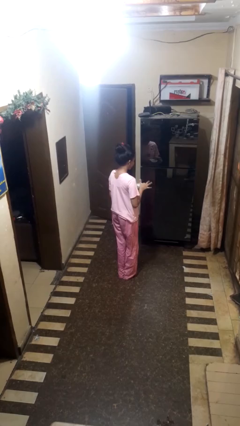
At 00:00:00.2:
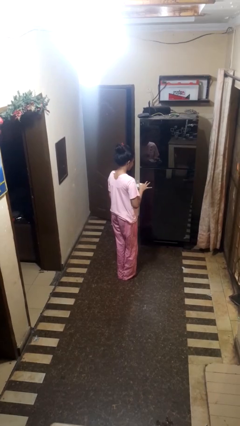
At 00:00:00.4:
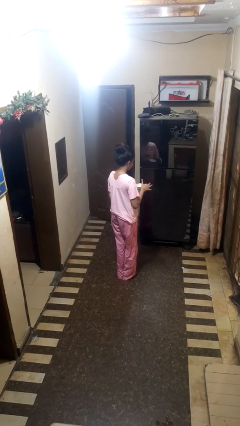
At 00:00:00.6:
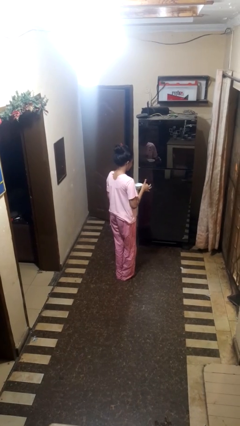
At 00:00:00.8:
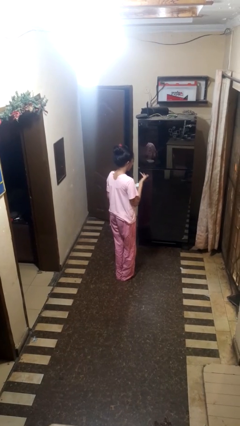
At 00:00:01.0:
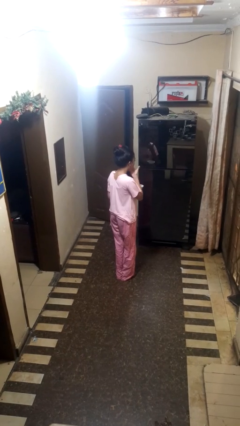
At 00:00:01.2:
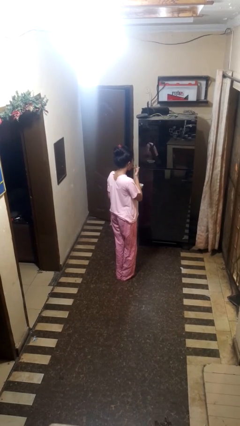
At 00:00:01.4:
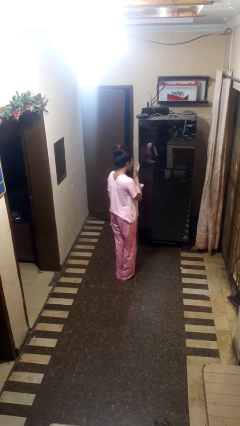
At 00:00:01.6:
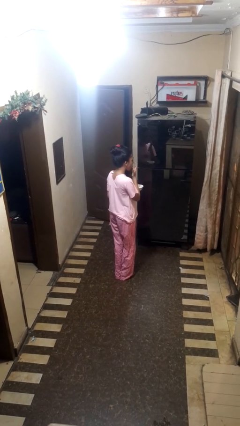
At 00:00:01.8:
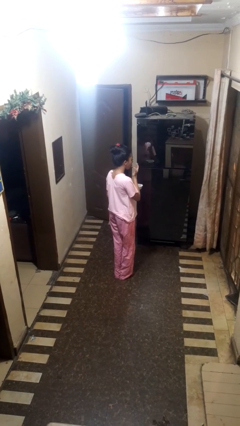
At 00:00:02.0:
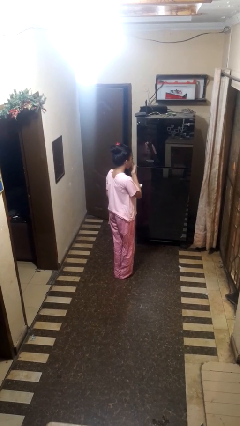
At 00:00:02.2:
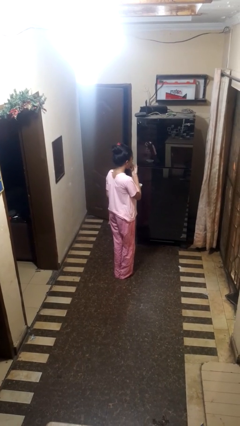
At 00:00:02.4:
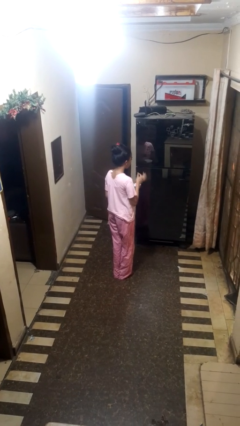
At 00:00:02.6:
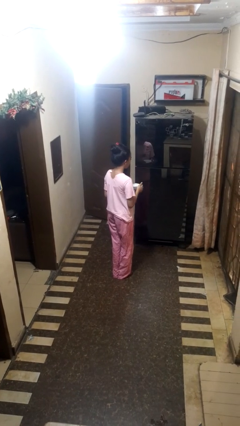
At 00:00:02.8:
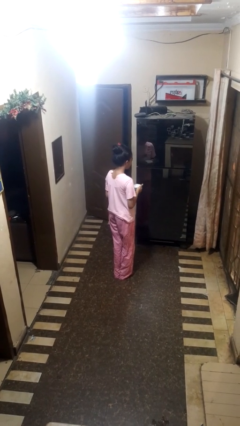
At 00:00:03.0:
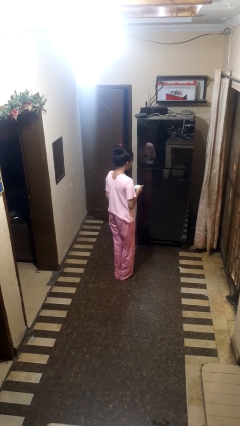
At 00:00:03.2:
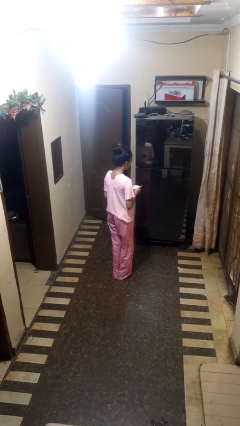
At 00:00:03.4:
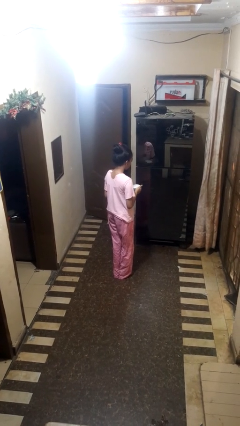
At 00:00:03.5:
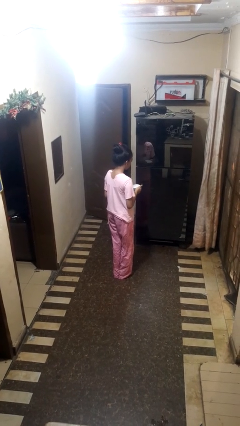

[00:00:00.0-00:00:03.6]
person licks fingers

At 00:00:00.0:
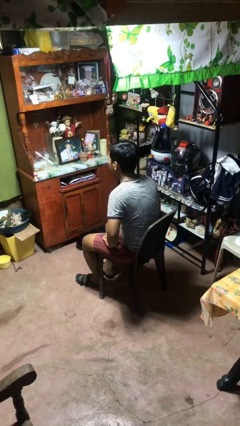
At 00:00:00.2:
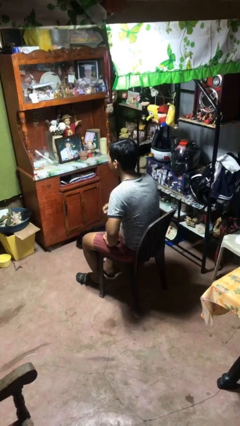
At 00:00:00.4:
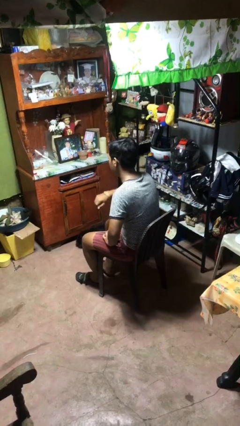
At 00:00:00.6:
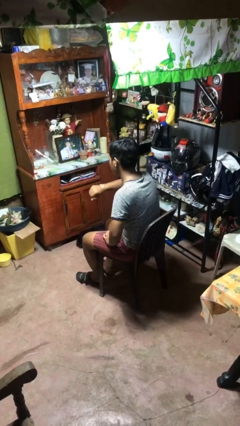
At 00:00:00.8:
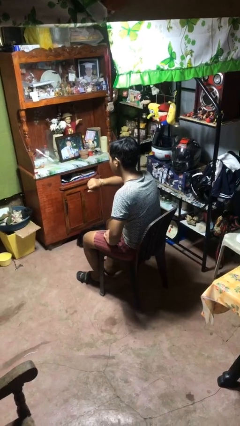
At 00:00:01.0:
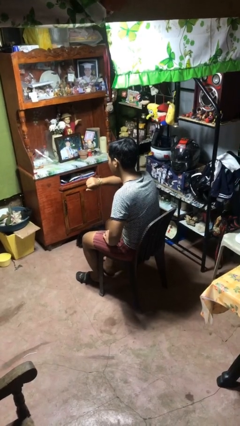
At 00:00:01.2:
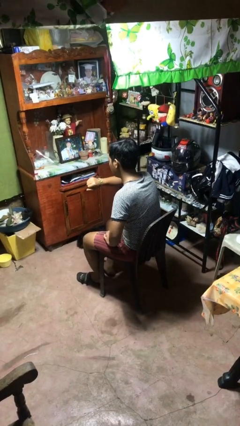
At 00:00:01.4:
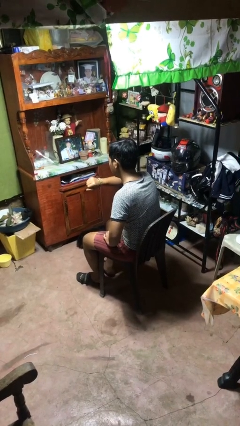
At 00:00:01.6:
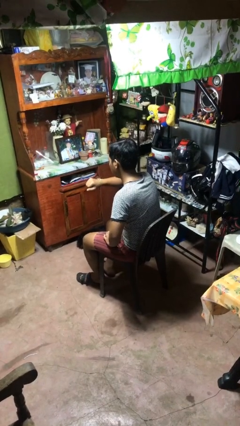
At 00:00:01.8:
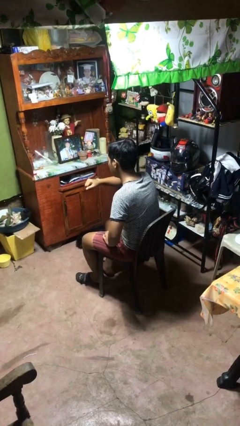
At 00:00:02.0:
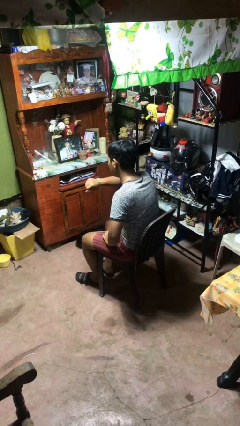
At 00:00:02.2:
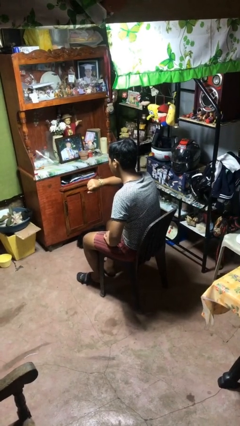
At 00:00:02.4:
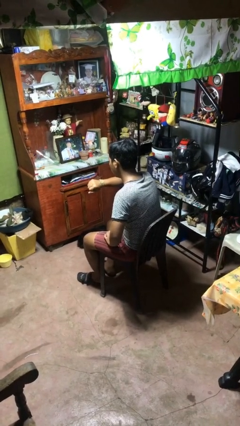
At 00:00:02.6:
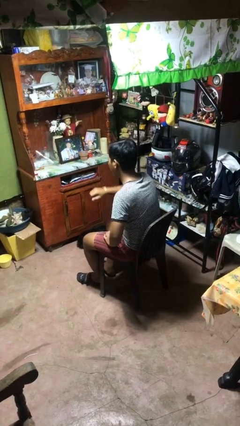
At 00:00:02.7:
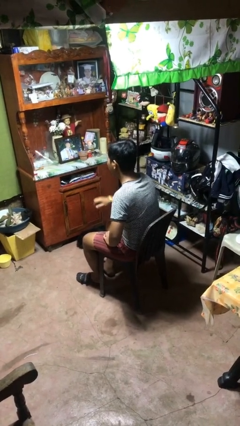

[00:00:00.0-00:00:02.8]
person looks at wristwatch

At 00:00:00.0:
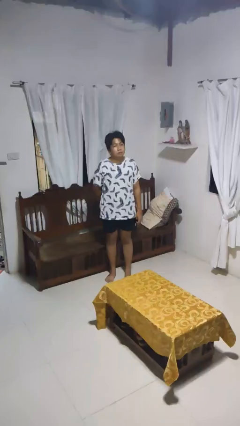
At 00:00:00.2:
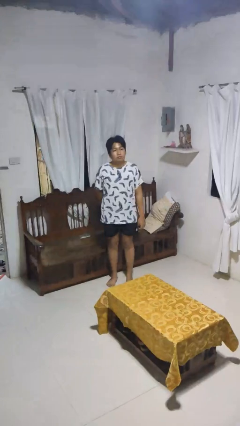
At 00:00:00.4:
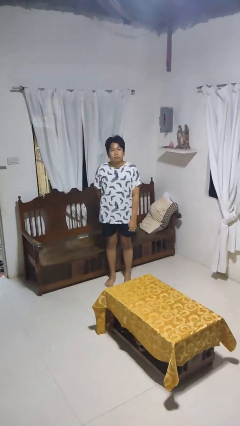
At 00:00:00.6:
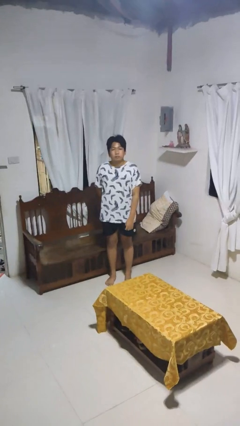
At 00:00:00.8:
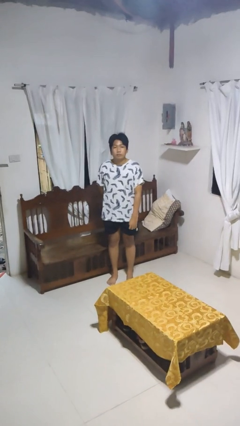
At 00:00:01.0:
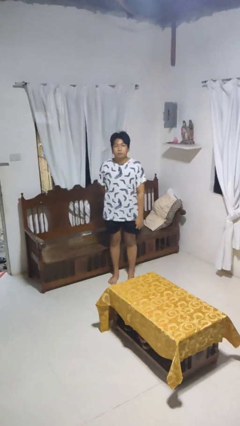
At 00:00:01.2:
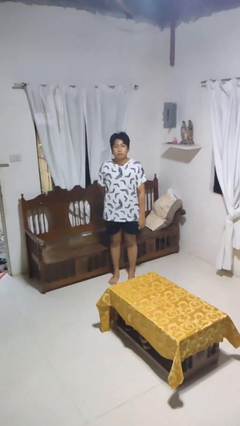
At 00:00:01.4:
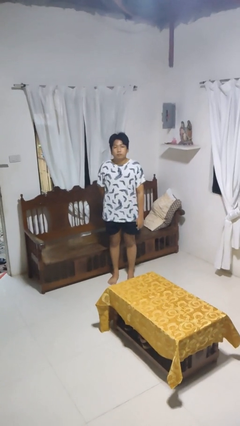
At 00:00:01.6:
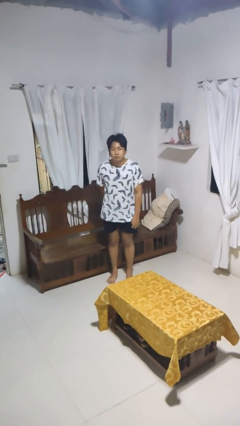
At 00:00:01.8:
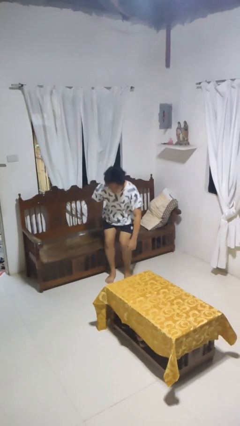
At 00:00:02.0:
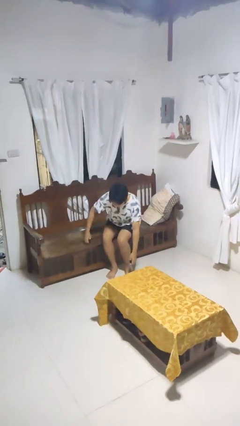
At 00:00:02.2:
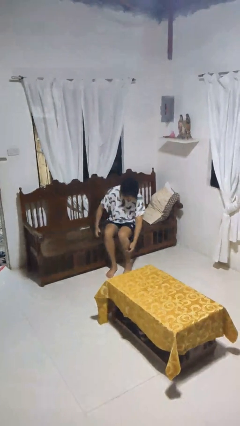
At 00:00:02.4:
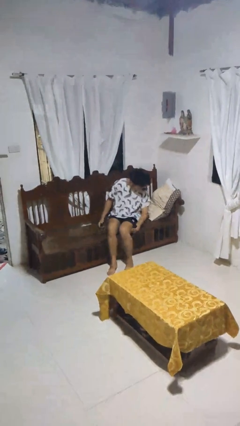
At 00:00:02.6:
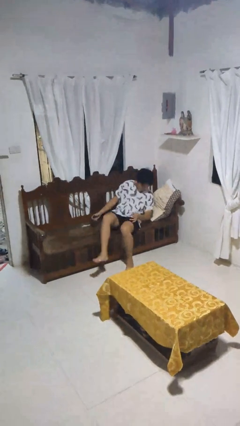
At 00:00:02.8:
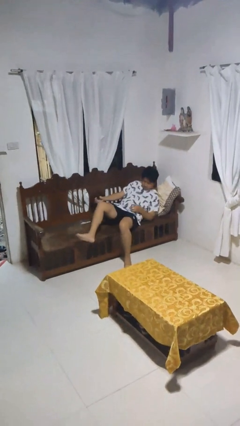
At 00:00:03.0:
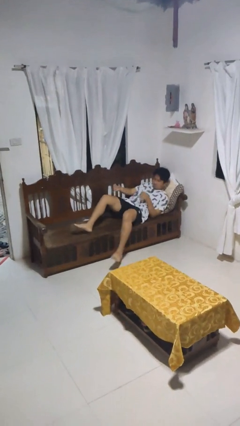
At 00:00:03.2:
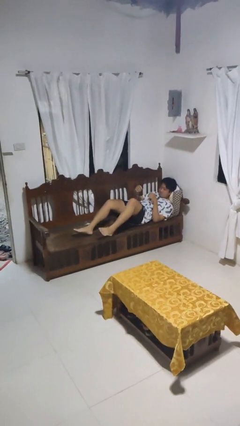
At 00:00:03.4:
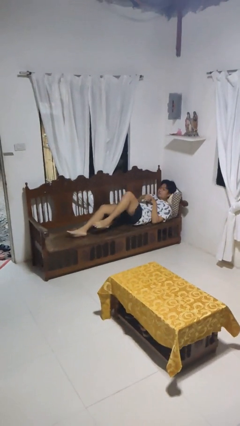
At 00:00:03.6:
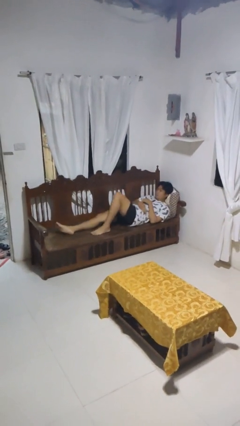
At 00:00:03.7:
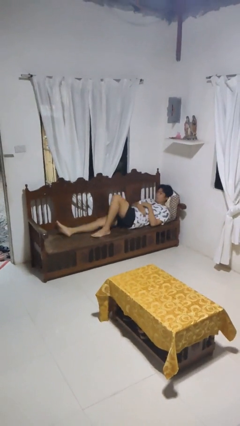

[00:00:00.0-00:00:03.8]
person lies down on couch

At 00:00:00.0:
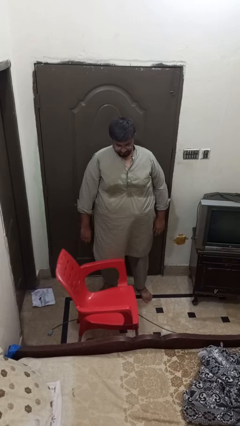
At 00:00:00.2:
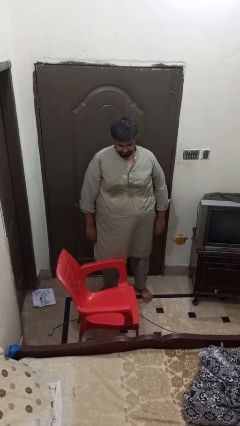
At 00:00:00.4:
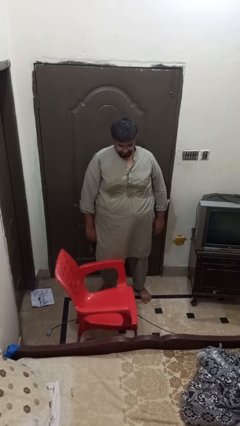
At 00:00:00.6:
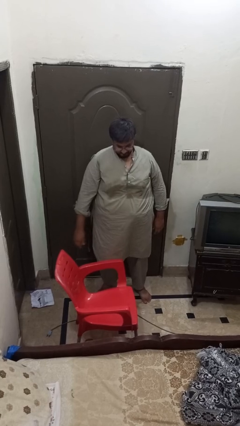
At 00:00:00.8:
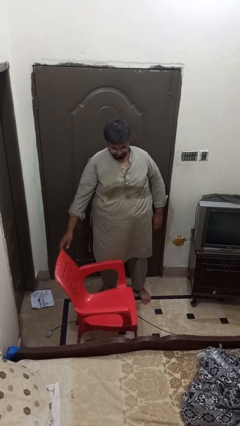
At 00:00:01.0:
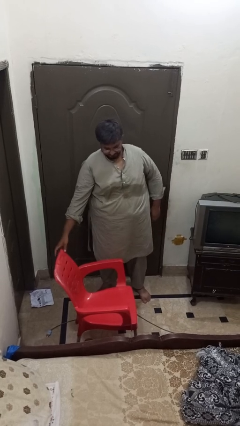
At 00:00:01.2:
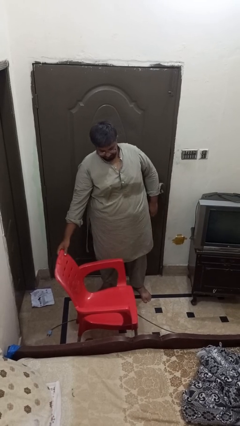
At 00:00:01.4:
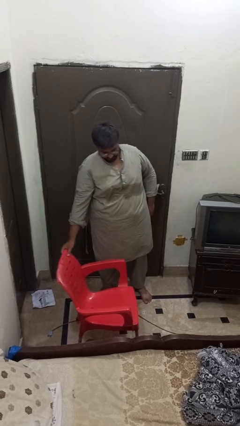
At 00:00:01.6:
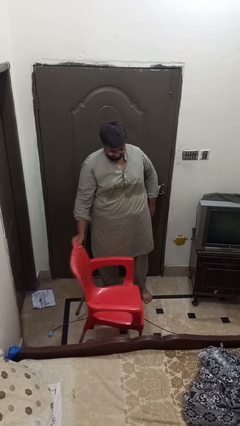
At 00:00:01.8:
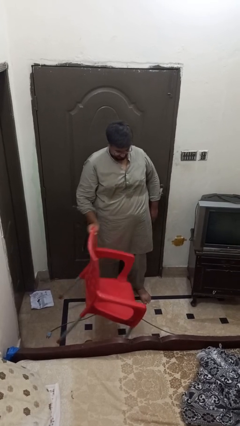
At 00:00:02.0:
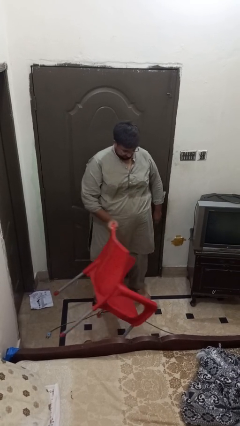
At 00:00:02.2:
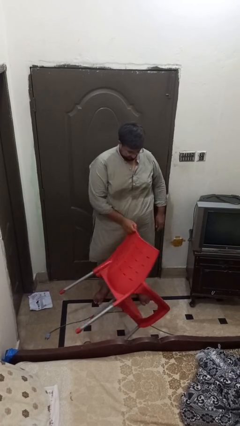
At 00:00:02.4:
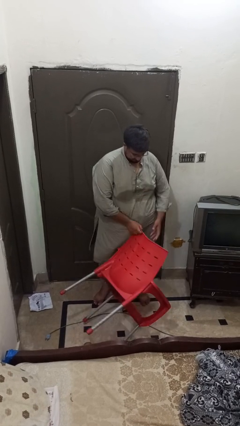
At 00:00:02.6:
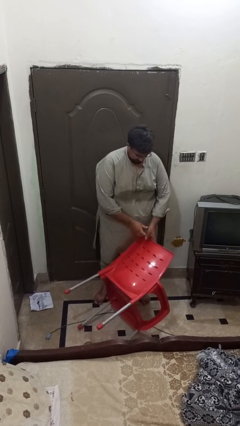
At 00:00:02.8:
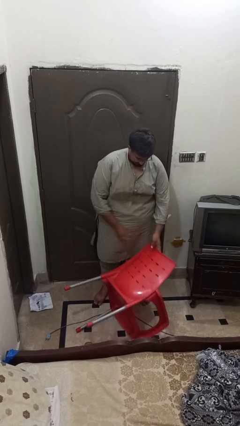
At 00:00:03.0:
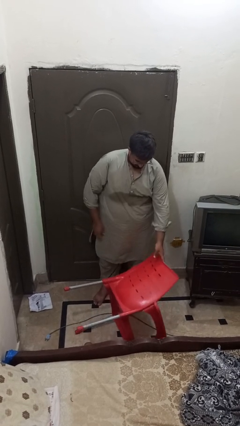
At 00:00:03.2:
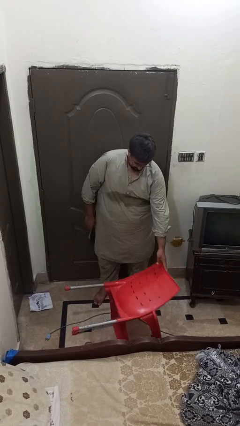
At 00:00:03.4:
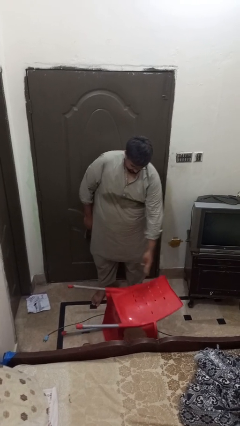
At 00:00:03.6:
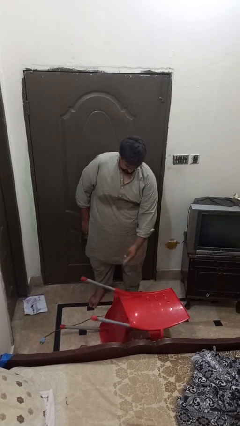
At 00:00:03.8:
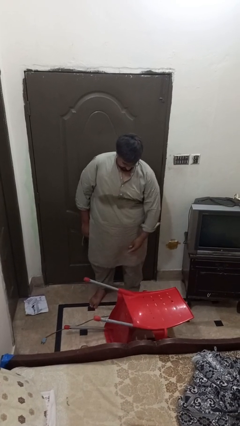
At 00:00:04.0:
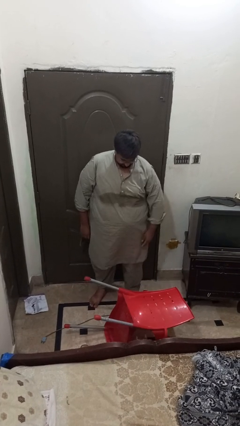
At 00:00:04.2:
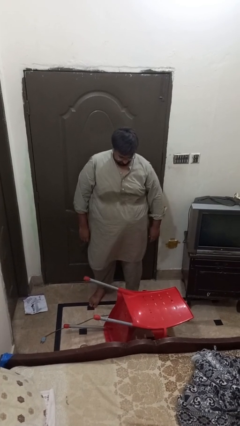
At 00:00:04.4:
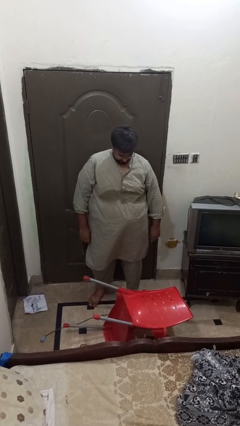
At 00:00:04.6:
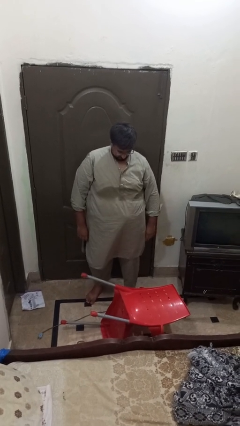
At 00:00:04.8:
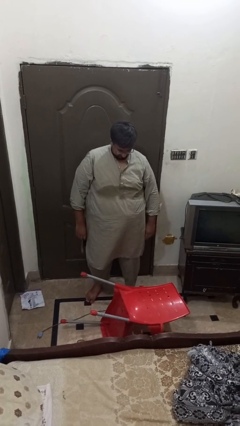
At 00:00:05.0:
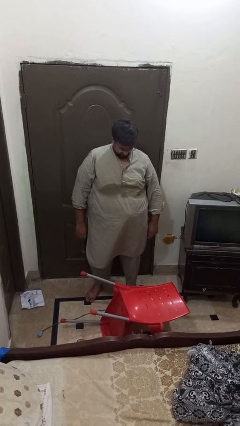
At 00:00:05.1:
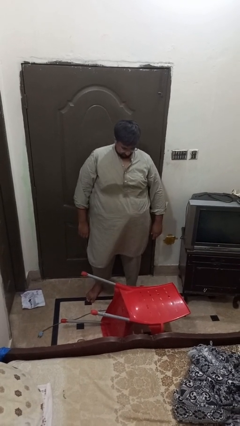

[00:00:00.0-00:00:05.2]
person knocks over furniture

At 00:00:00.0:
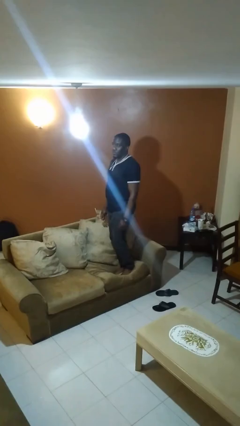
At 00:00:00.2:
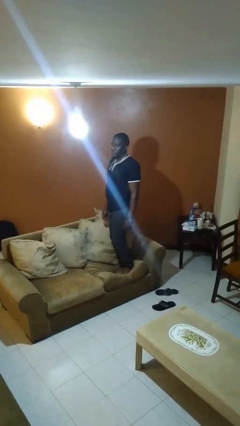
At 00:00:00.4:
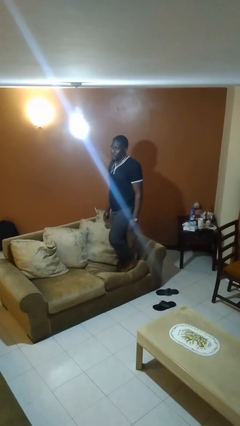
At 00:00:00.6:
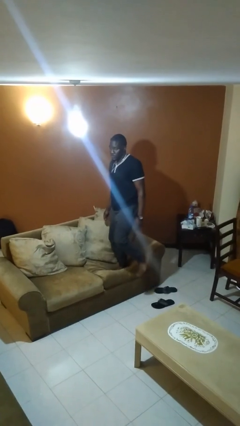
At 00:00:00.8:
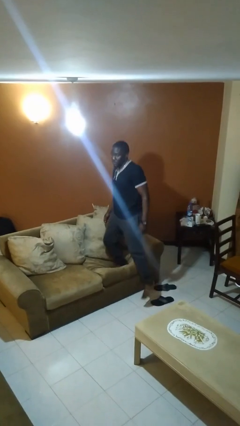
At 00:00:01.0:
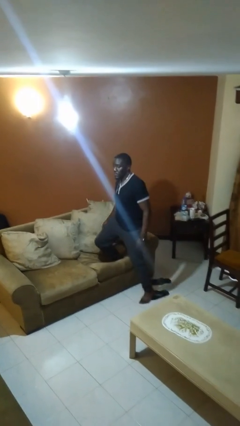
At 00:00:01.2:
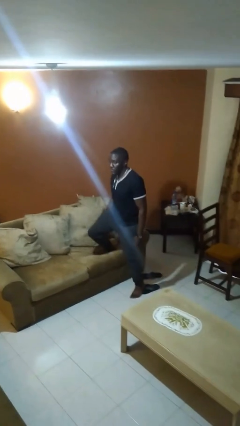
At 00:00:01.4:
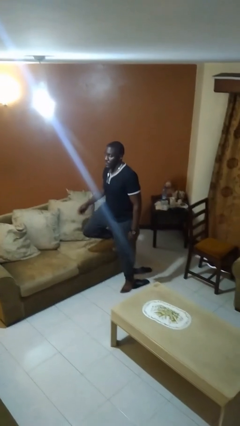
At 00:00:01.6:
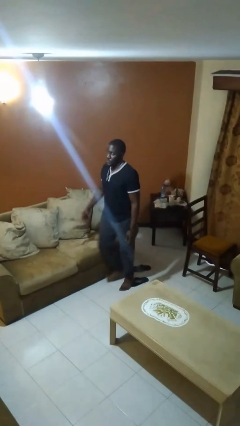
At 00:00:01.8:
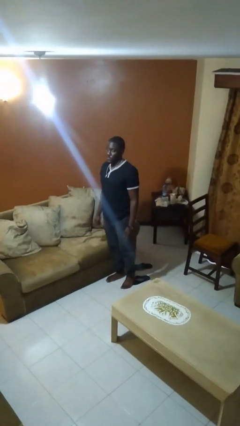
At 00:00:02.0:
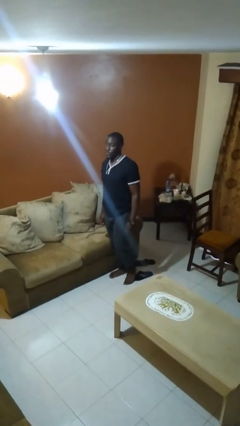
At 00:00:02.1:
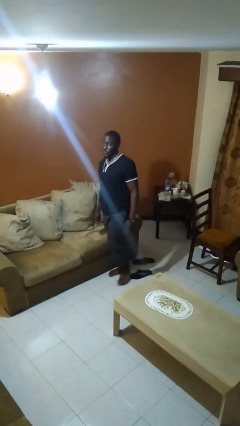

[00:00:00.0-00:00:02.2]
person climbs off couch

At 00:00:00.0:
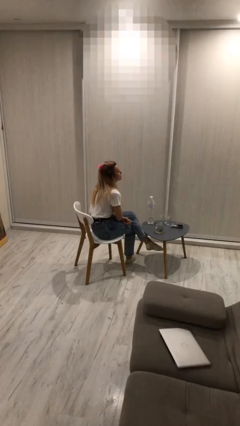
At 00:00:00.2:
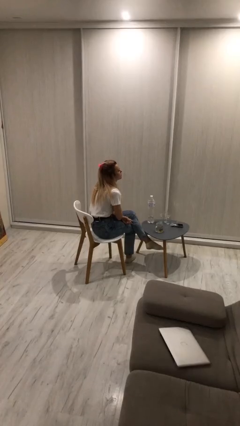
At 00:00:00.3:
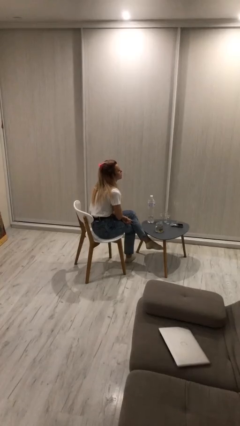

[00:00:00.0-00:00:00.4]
person snaps fingers
